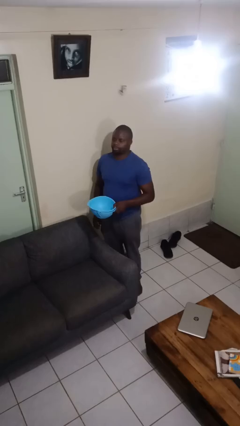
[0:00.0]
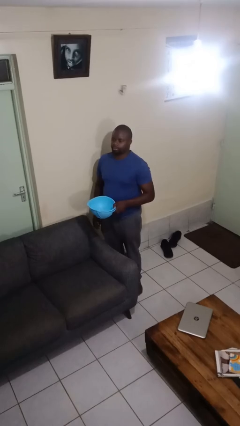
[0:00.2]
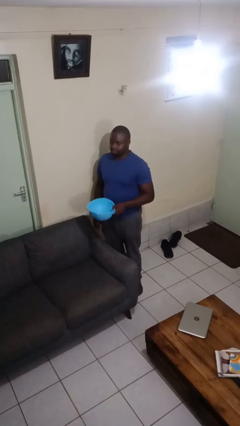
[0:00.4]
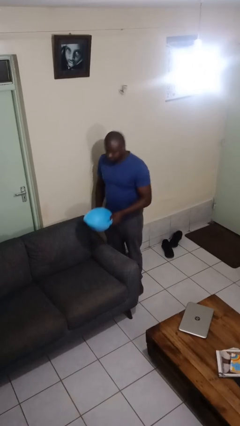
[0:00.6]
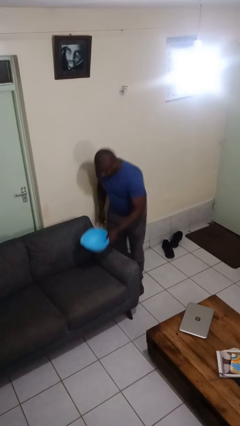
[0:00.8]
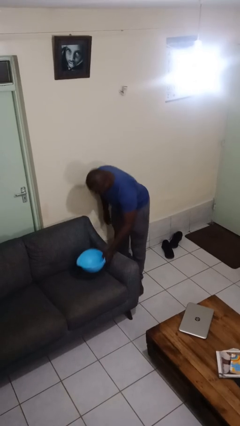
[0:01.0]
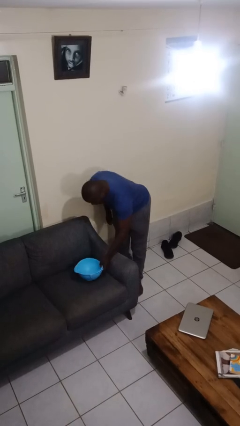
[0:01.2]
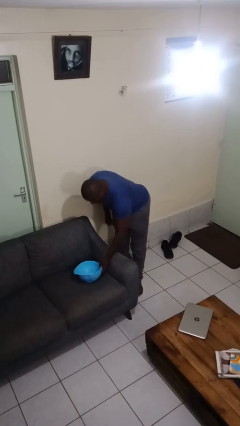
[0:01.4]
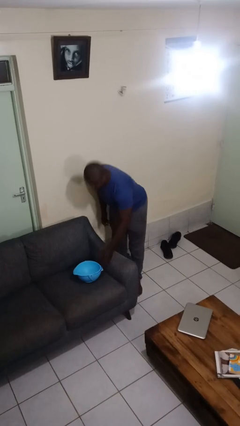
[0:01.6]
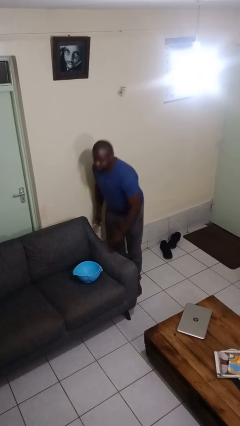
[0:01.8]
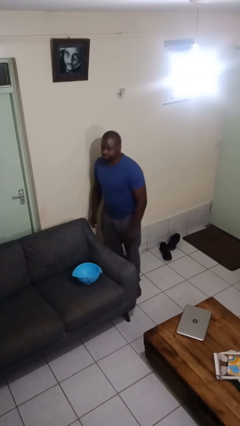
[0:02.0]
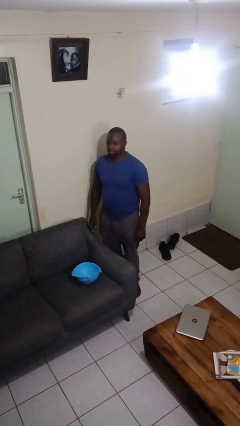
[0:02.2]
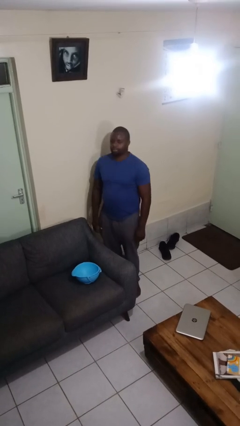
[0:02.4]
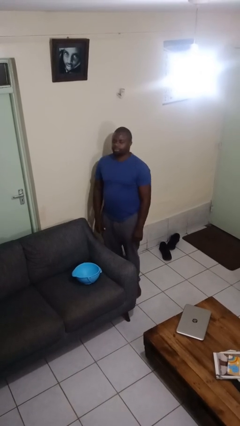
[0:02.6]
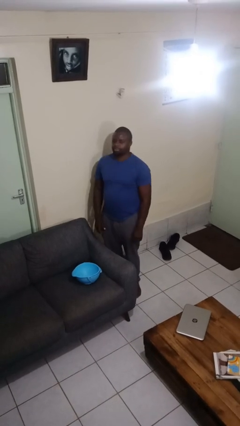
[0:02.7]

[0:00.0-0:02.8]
person puts down object on couch

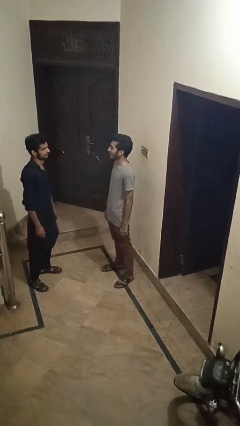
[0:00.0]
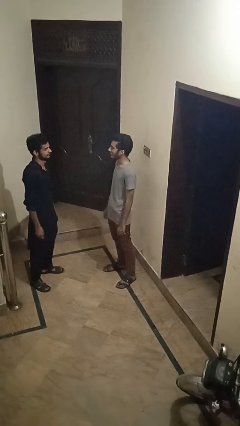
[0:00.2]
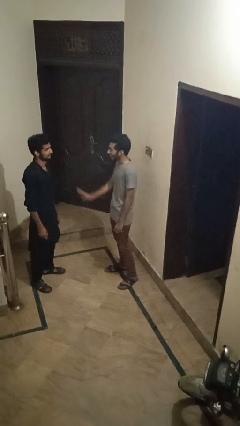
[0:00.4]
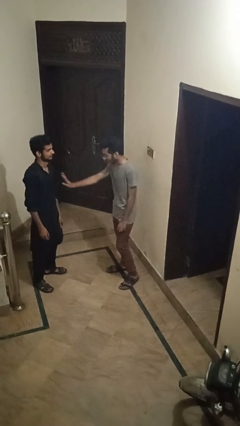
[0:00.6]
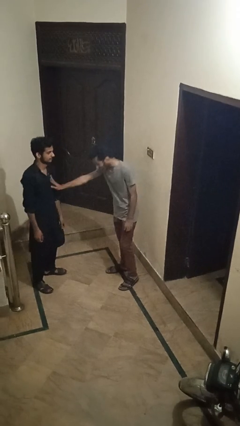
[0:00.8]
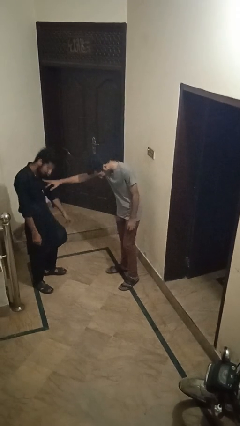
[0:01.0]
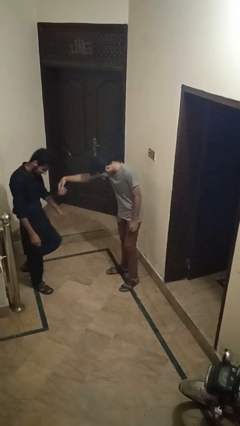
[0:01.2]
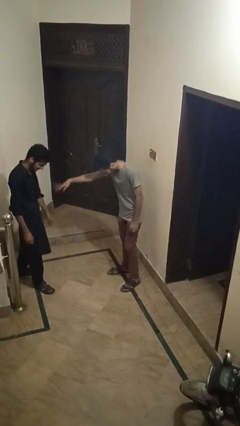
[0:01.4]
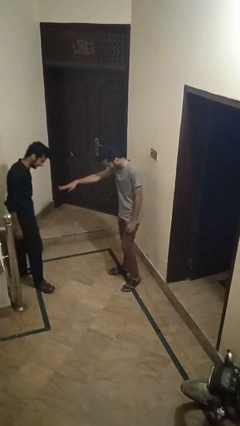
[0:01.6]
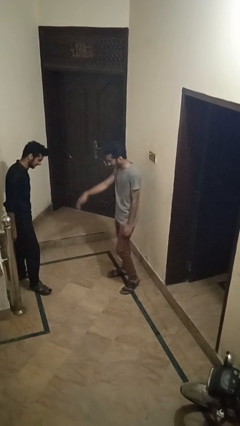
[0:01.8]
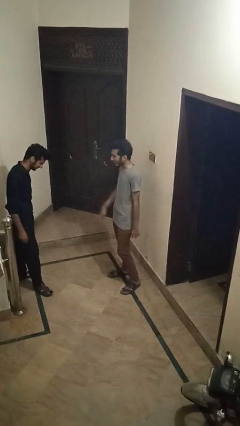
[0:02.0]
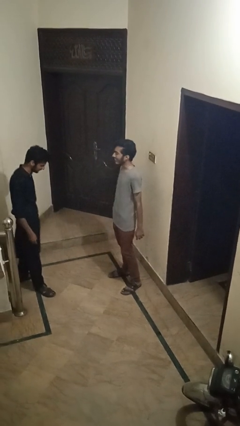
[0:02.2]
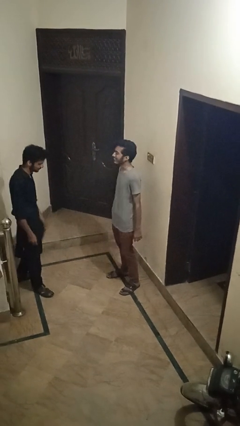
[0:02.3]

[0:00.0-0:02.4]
person shoves person

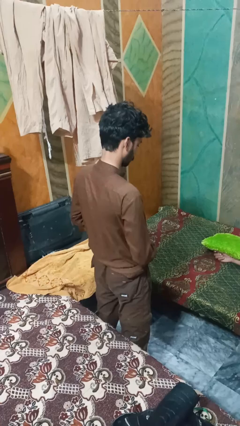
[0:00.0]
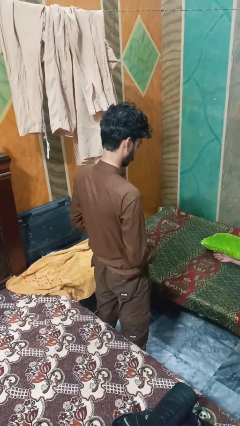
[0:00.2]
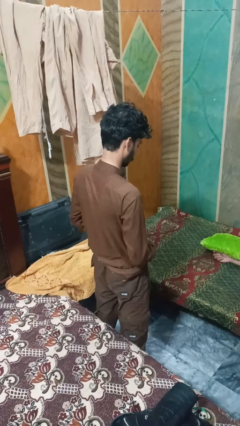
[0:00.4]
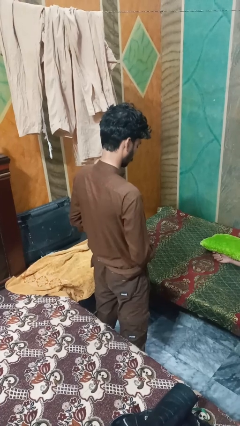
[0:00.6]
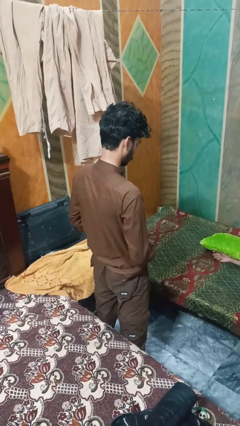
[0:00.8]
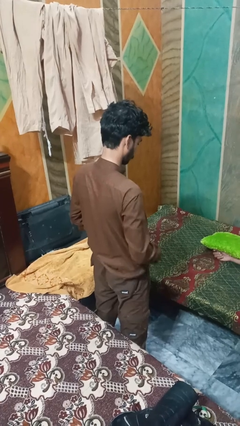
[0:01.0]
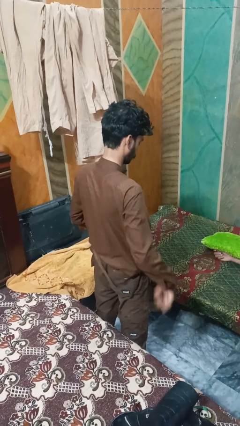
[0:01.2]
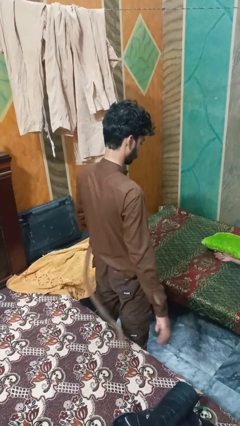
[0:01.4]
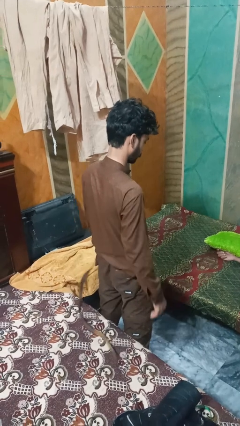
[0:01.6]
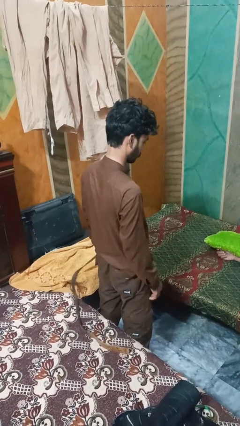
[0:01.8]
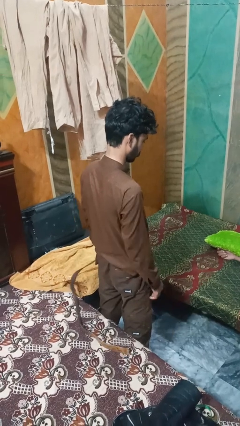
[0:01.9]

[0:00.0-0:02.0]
person takes off belt

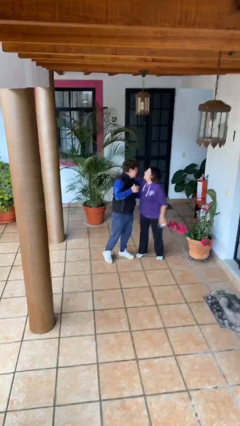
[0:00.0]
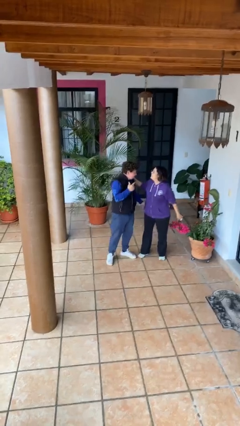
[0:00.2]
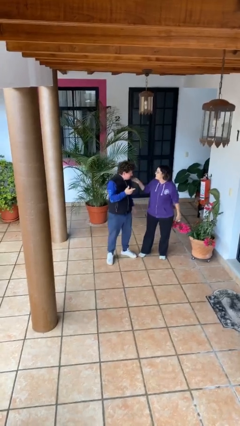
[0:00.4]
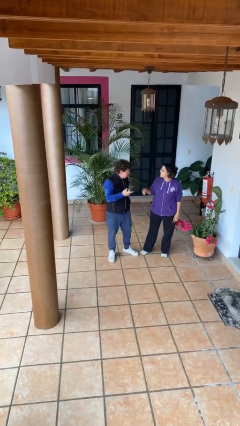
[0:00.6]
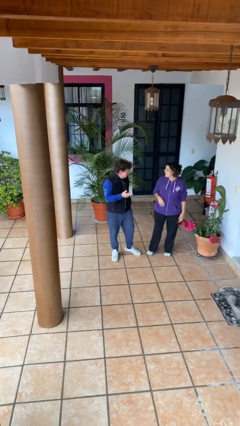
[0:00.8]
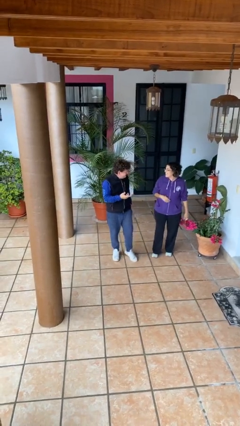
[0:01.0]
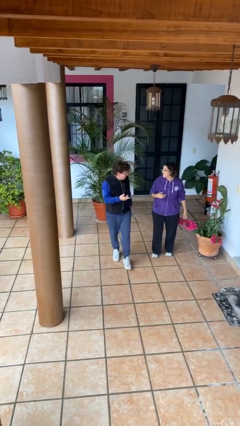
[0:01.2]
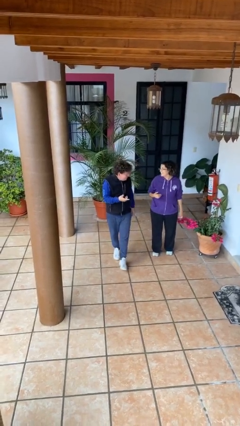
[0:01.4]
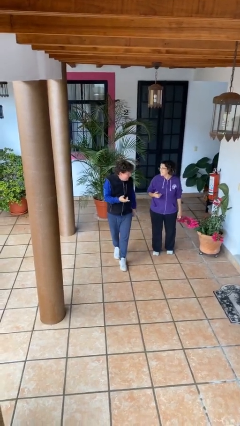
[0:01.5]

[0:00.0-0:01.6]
person talks to person

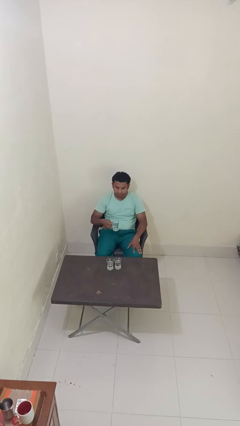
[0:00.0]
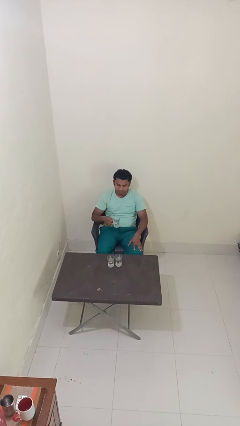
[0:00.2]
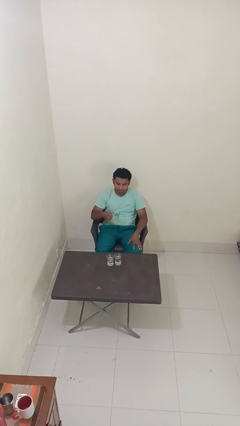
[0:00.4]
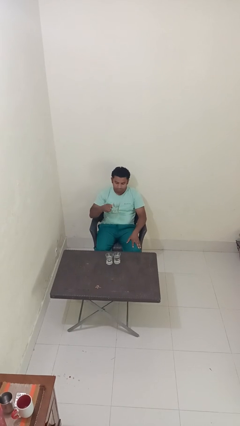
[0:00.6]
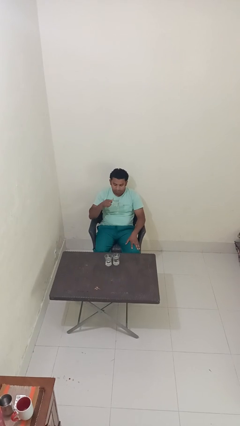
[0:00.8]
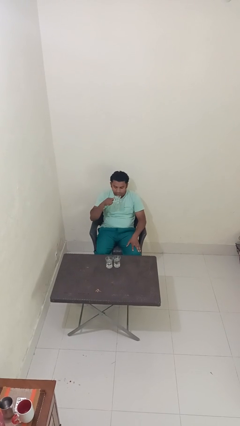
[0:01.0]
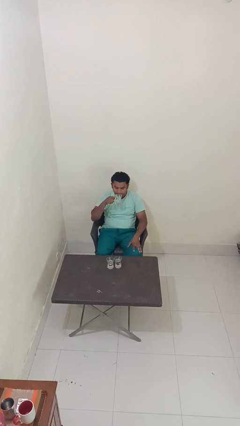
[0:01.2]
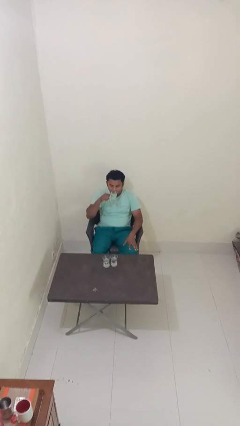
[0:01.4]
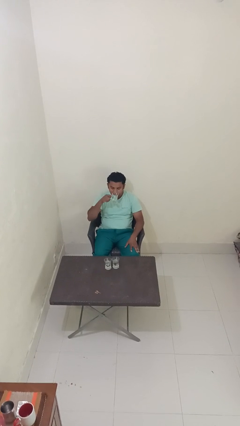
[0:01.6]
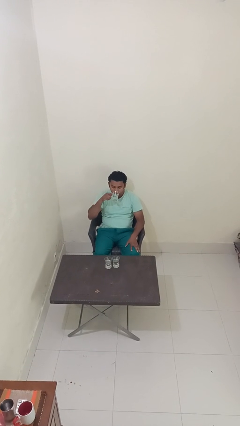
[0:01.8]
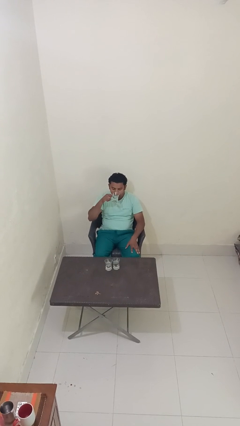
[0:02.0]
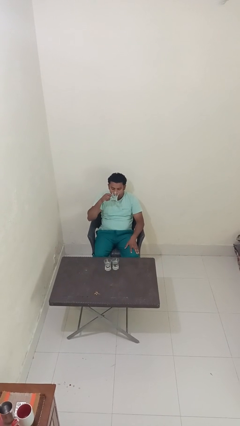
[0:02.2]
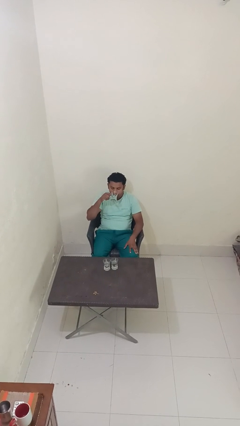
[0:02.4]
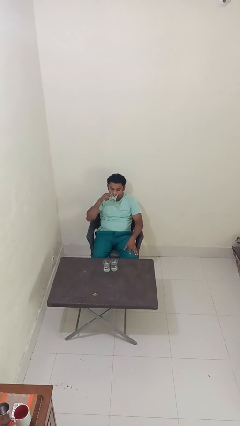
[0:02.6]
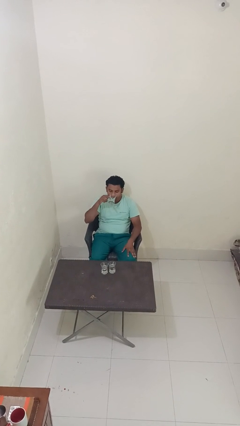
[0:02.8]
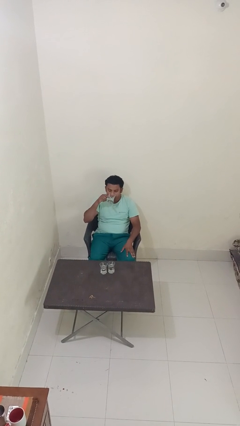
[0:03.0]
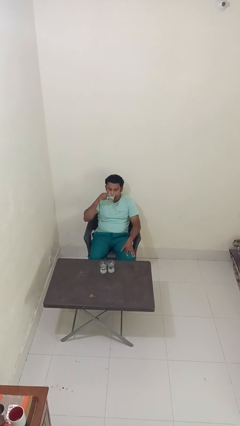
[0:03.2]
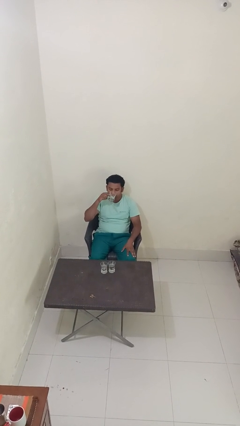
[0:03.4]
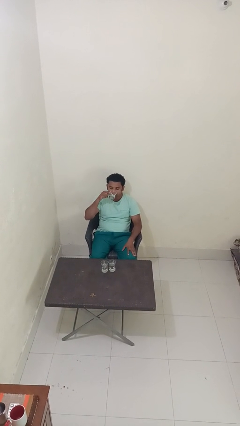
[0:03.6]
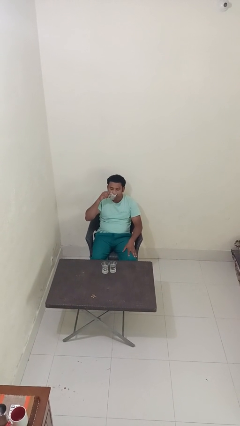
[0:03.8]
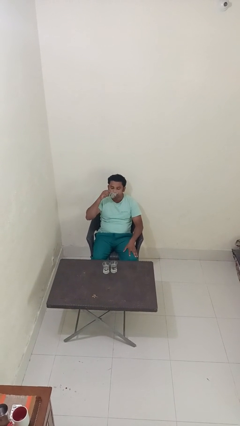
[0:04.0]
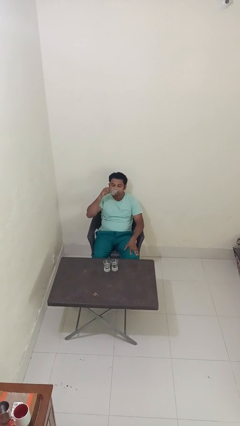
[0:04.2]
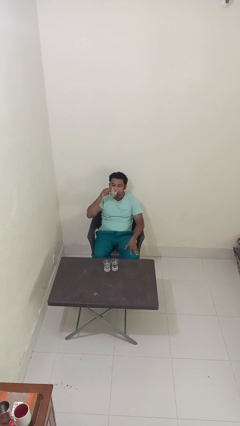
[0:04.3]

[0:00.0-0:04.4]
person drinks from shotglass

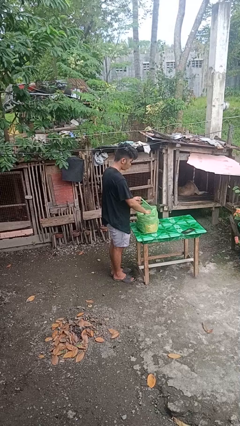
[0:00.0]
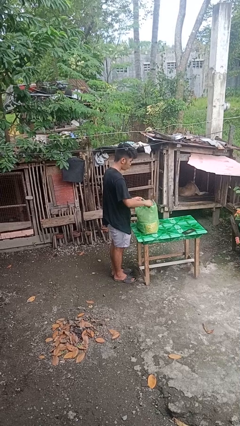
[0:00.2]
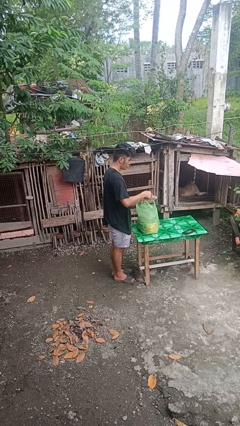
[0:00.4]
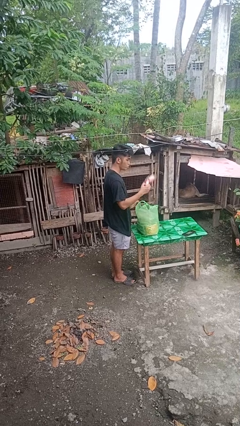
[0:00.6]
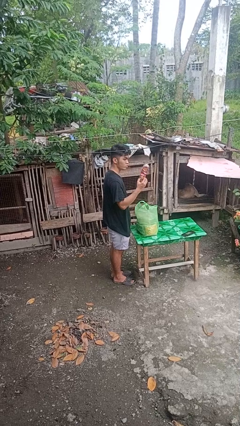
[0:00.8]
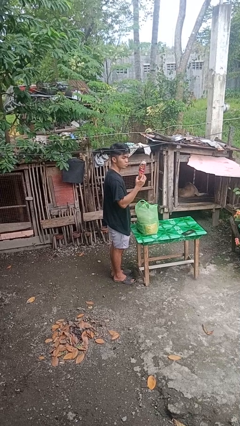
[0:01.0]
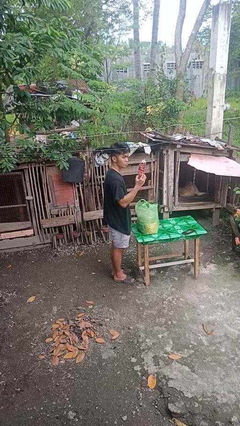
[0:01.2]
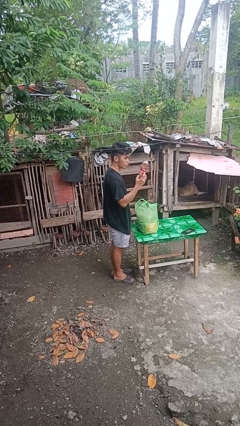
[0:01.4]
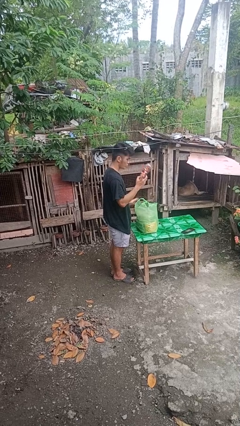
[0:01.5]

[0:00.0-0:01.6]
person takes object from bag

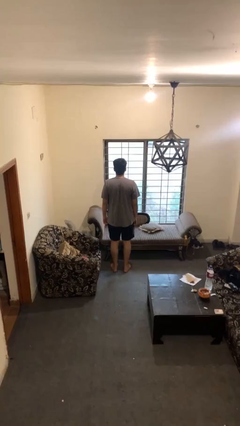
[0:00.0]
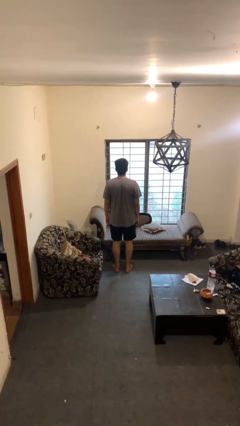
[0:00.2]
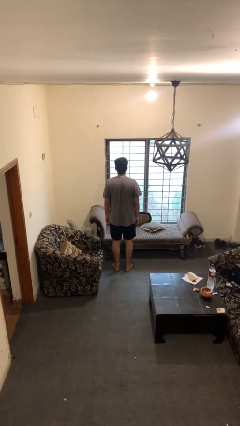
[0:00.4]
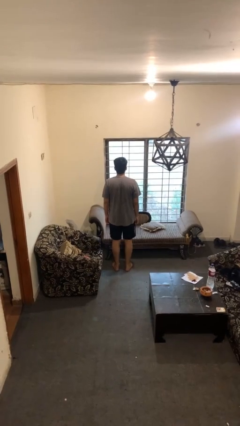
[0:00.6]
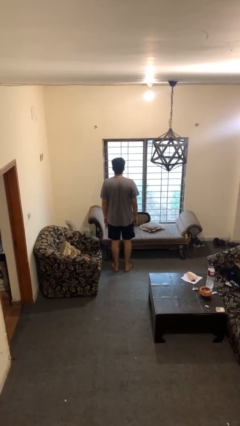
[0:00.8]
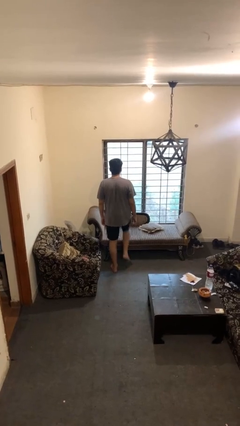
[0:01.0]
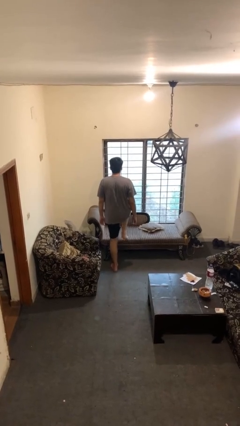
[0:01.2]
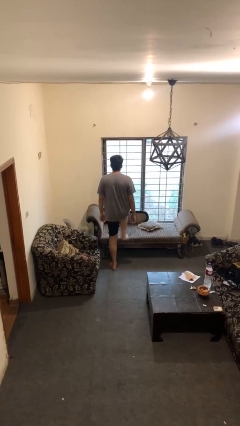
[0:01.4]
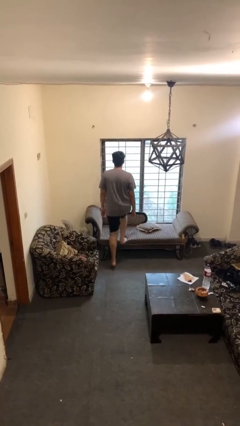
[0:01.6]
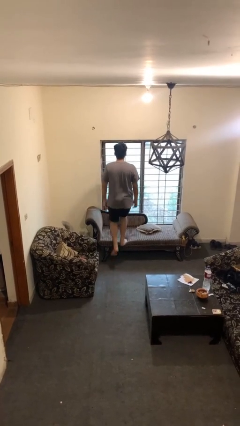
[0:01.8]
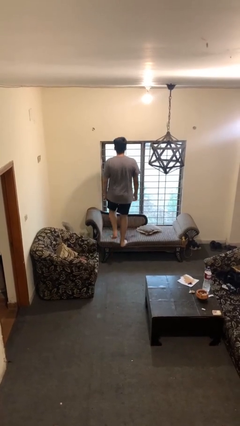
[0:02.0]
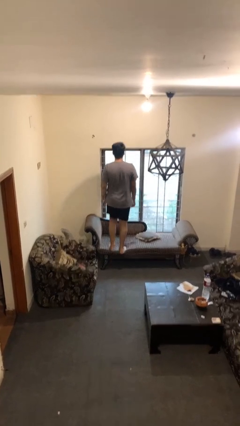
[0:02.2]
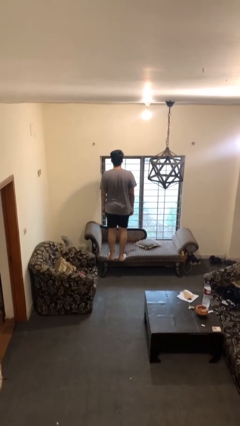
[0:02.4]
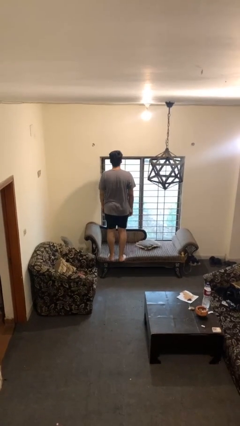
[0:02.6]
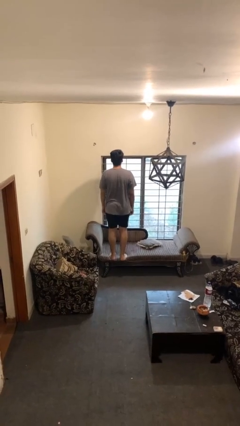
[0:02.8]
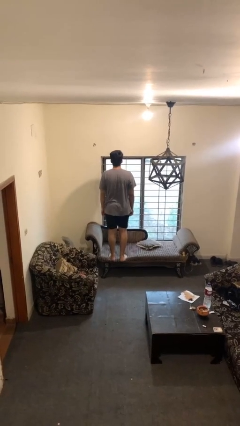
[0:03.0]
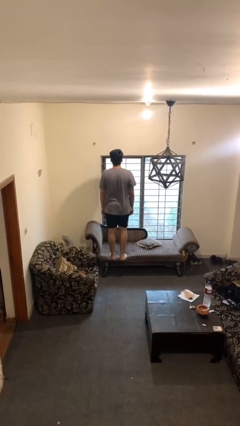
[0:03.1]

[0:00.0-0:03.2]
person climbs on couch
